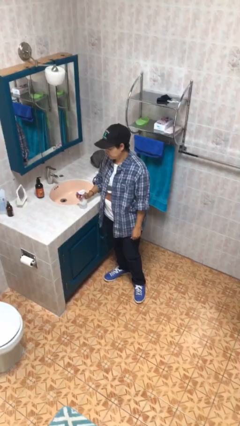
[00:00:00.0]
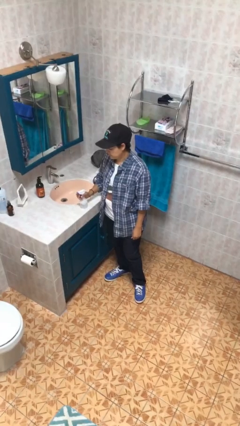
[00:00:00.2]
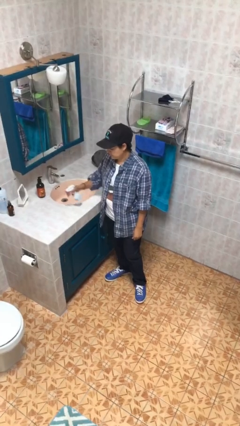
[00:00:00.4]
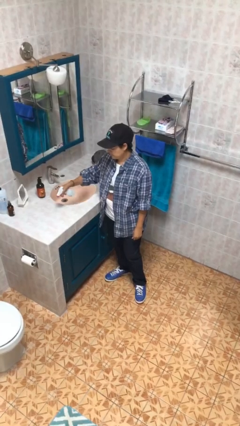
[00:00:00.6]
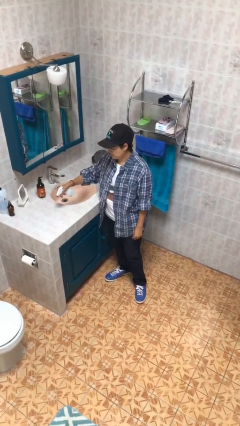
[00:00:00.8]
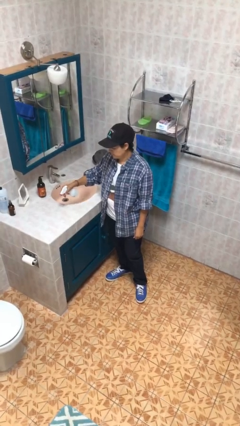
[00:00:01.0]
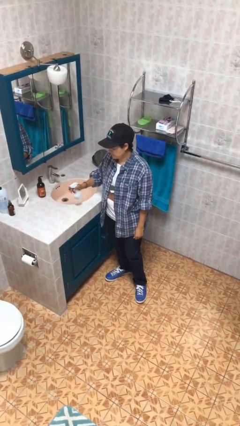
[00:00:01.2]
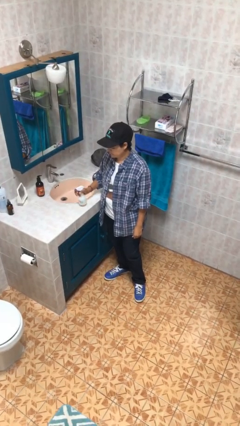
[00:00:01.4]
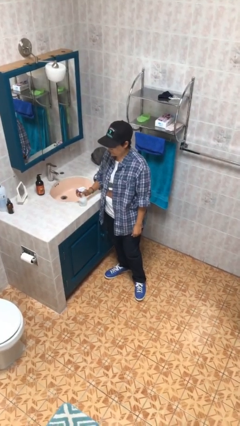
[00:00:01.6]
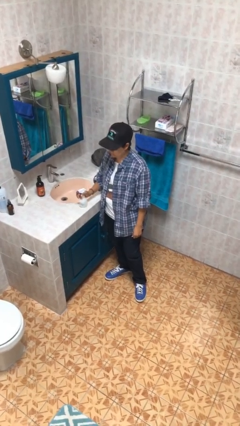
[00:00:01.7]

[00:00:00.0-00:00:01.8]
person sprays from bottle

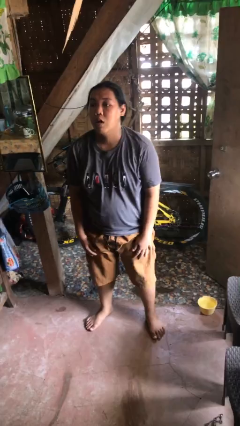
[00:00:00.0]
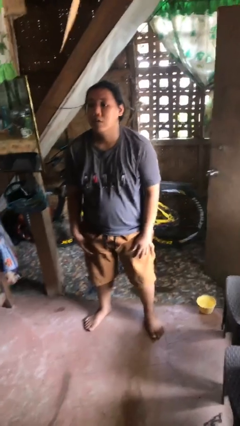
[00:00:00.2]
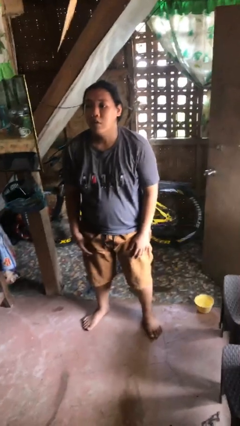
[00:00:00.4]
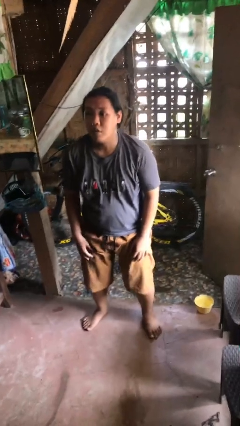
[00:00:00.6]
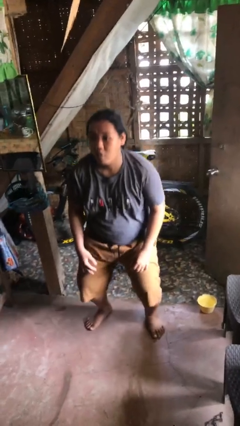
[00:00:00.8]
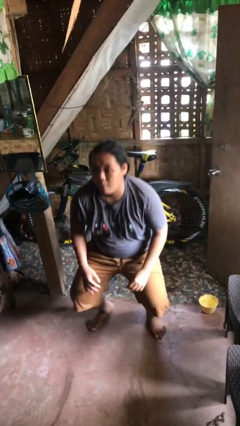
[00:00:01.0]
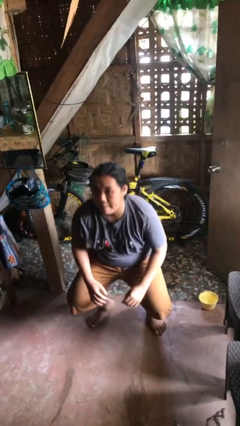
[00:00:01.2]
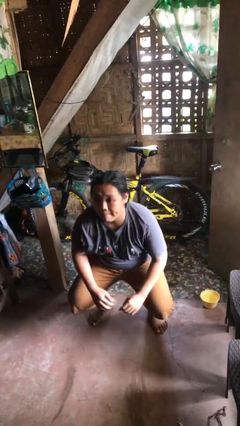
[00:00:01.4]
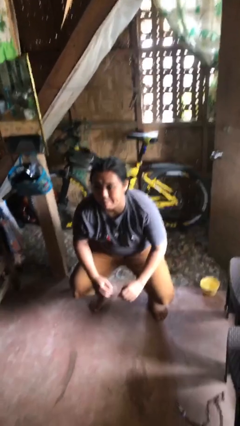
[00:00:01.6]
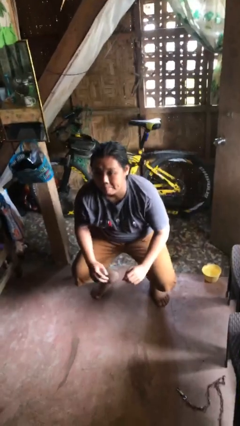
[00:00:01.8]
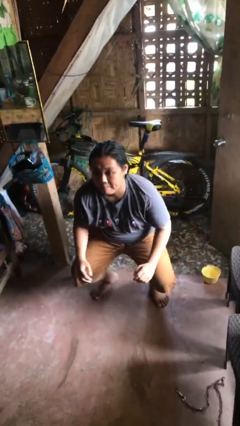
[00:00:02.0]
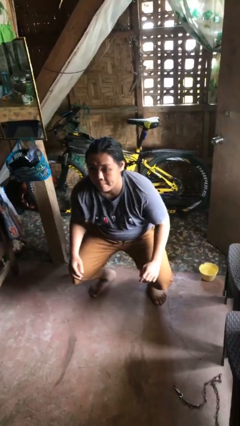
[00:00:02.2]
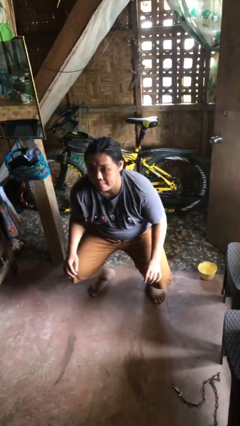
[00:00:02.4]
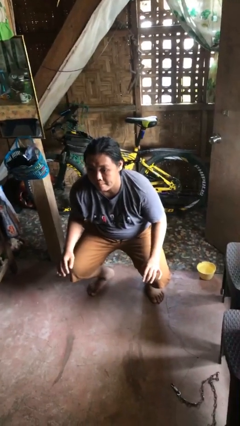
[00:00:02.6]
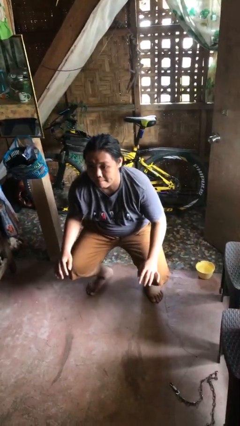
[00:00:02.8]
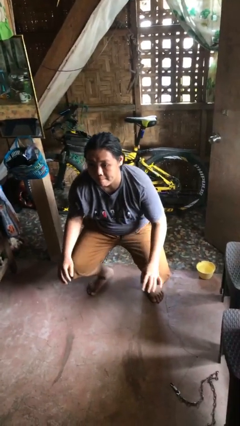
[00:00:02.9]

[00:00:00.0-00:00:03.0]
person squats

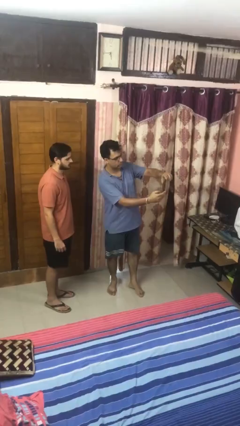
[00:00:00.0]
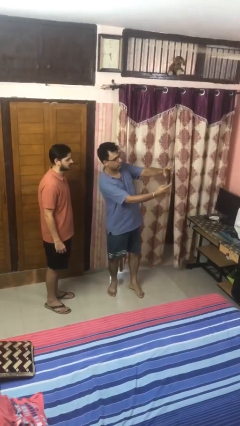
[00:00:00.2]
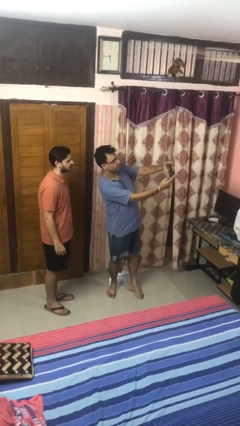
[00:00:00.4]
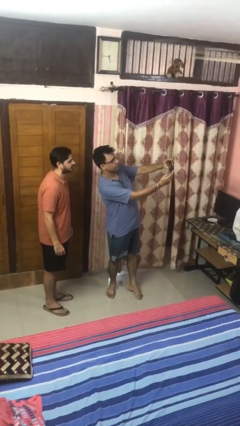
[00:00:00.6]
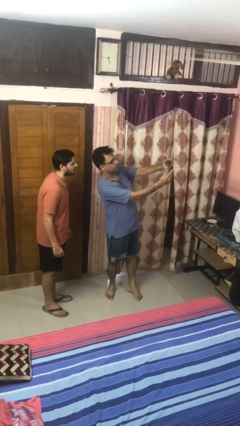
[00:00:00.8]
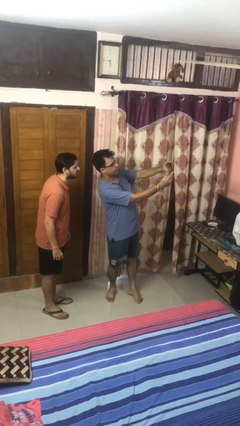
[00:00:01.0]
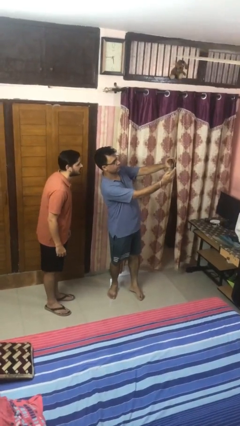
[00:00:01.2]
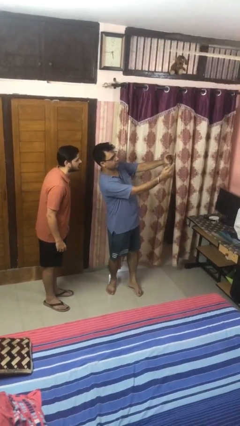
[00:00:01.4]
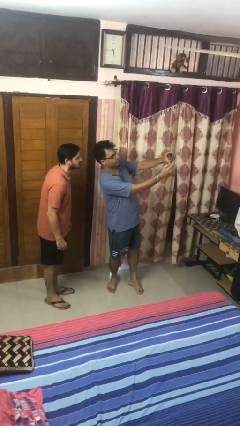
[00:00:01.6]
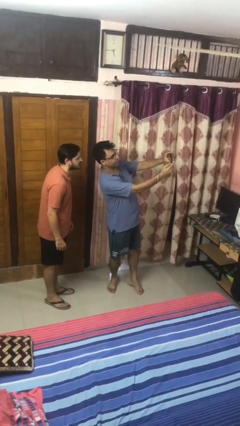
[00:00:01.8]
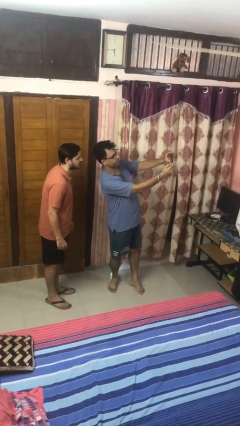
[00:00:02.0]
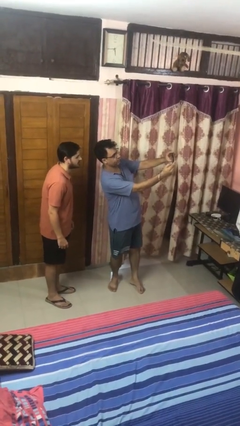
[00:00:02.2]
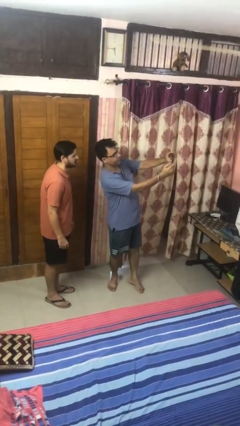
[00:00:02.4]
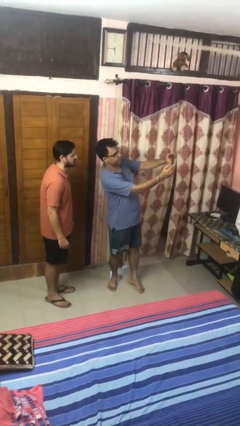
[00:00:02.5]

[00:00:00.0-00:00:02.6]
person takes selfie with person

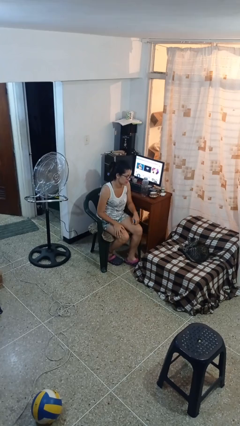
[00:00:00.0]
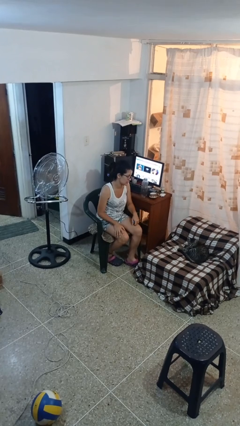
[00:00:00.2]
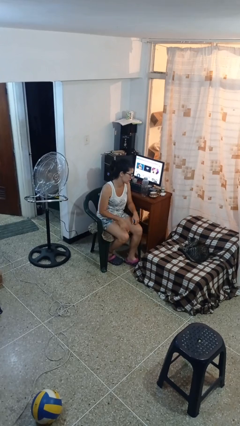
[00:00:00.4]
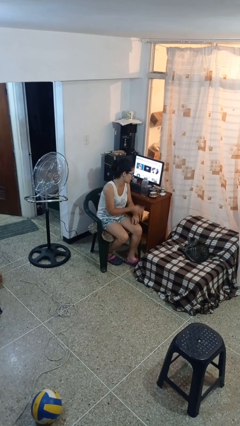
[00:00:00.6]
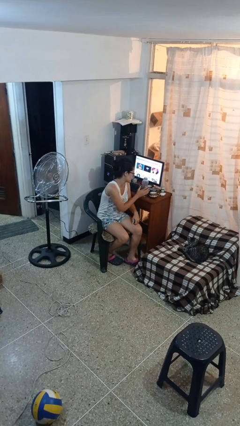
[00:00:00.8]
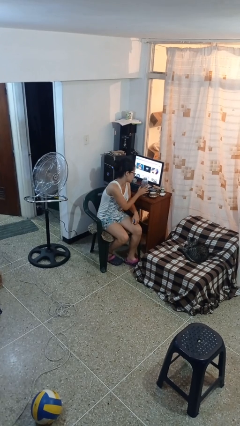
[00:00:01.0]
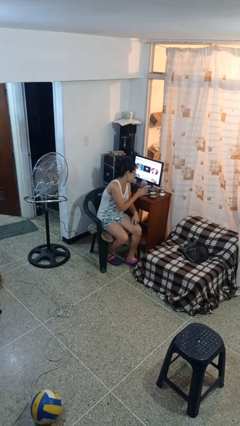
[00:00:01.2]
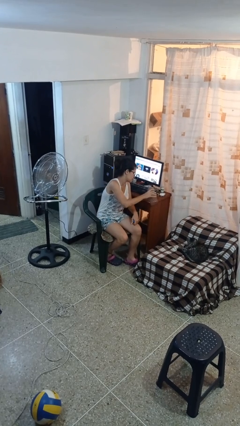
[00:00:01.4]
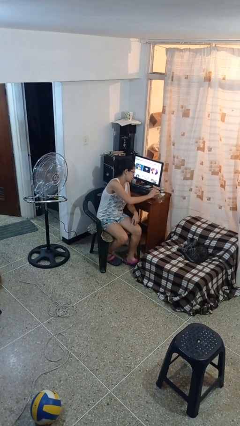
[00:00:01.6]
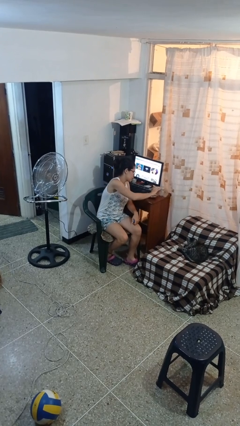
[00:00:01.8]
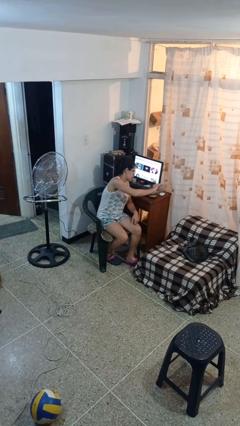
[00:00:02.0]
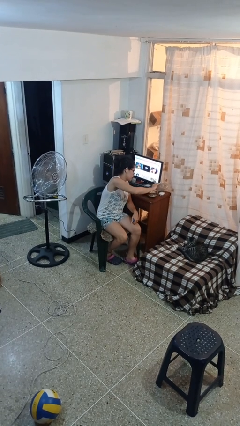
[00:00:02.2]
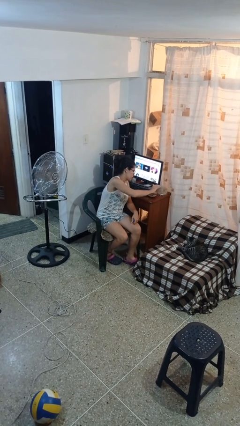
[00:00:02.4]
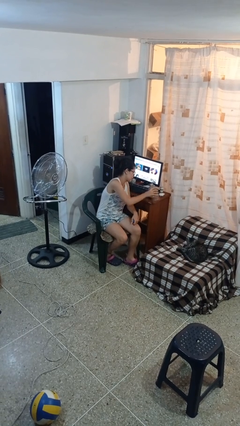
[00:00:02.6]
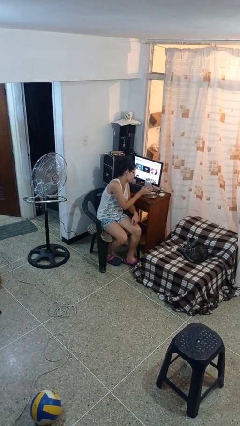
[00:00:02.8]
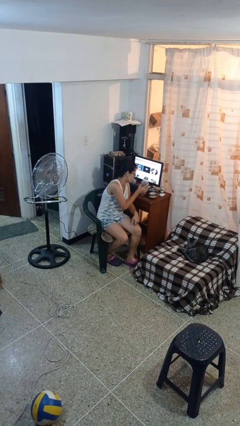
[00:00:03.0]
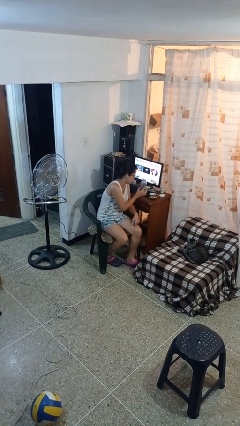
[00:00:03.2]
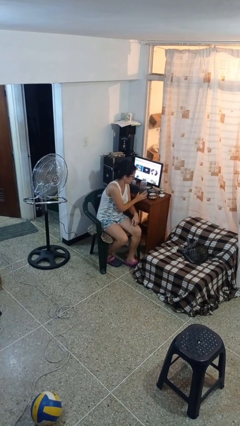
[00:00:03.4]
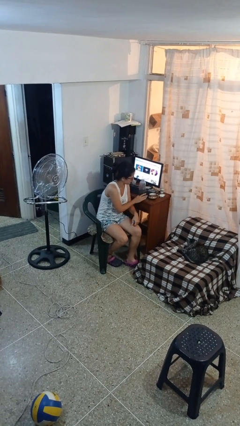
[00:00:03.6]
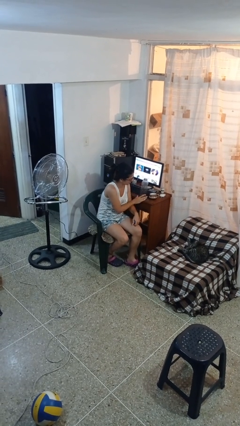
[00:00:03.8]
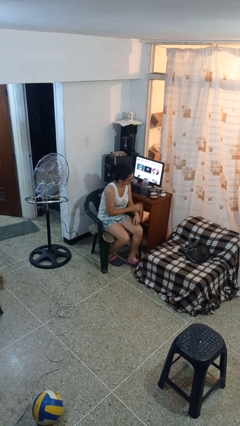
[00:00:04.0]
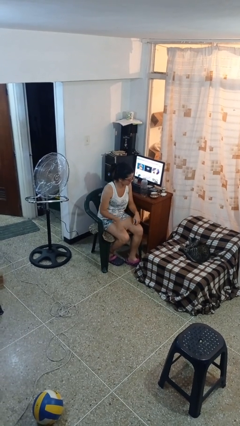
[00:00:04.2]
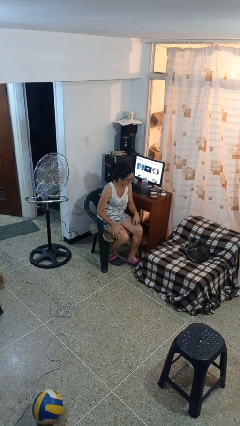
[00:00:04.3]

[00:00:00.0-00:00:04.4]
person pours liquid into cup

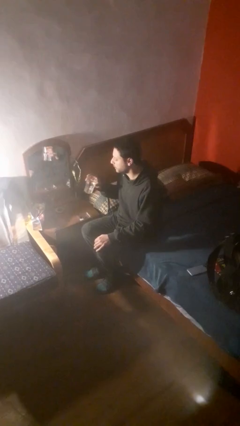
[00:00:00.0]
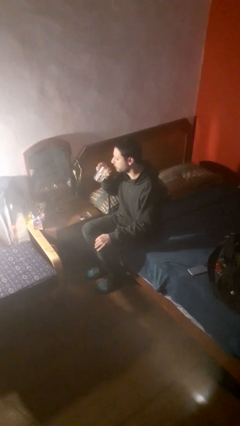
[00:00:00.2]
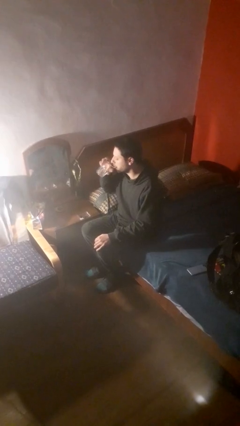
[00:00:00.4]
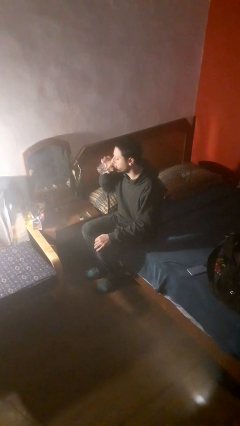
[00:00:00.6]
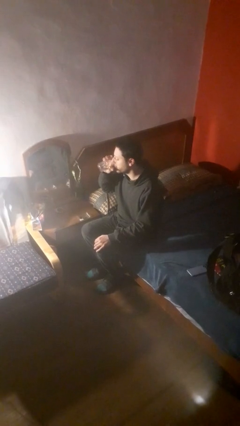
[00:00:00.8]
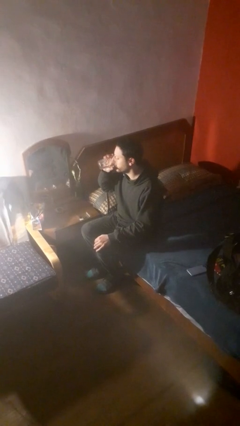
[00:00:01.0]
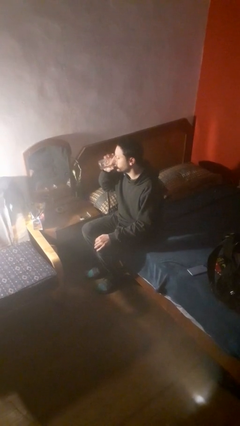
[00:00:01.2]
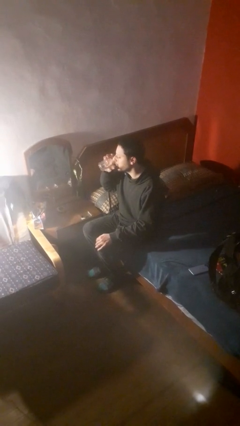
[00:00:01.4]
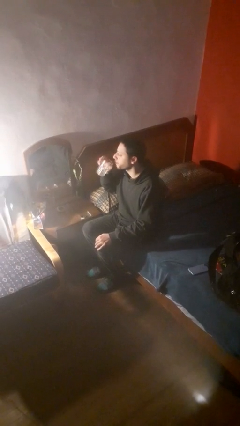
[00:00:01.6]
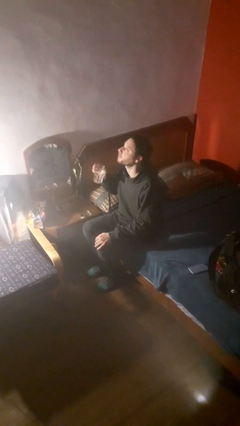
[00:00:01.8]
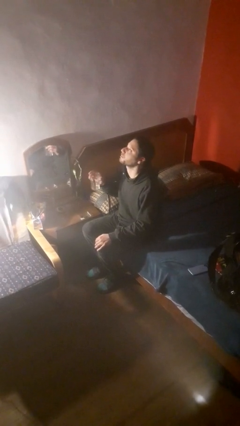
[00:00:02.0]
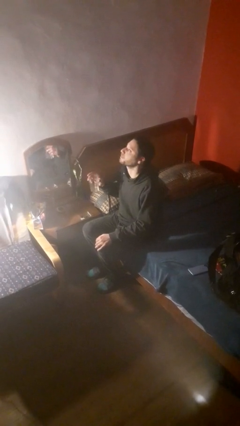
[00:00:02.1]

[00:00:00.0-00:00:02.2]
person drinks from cup

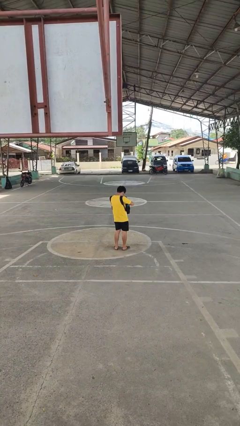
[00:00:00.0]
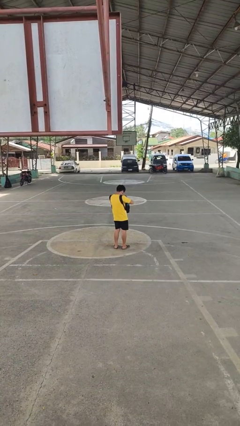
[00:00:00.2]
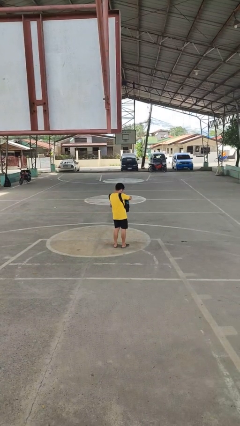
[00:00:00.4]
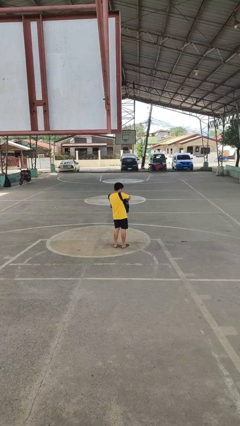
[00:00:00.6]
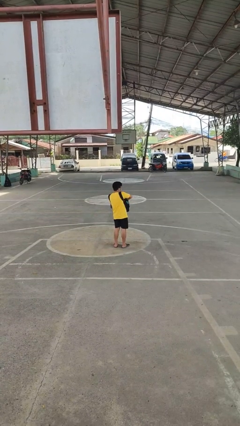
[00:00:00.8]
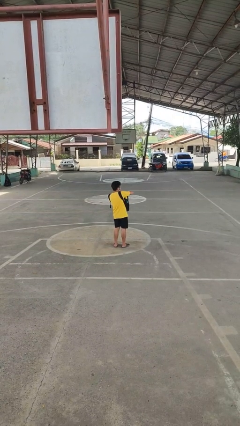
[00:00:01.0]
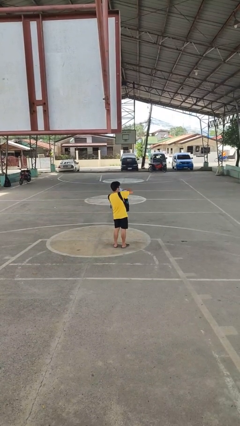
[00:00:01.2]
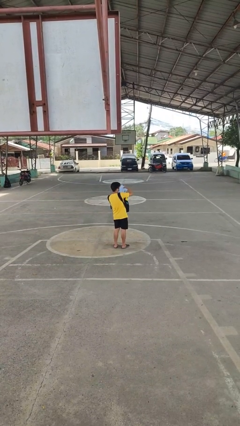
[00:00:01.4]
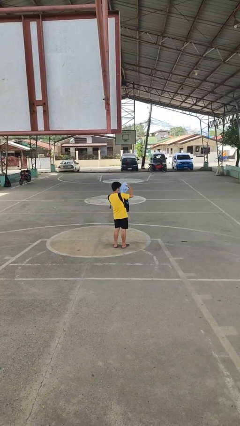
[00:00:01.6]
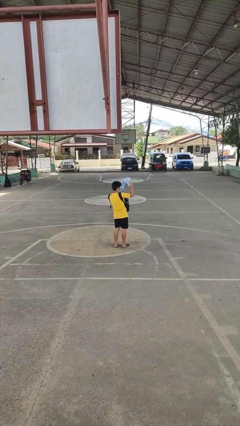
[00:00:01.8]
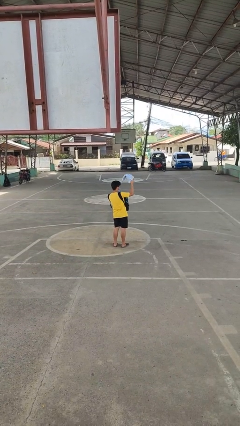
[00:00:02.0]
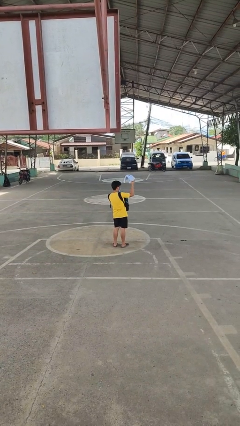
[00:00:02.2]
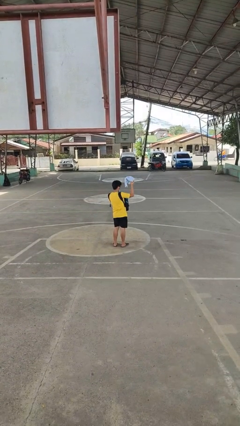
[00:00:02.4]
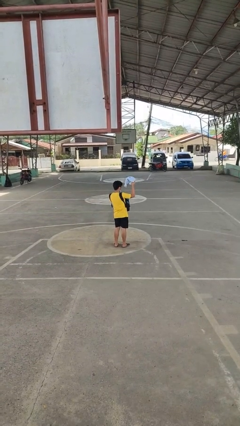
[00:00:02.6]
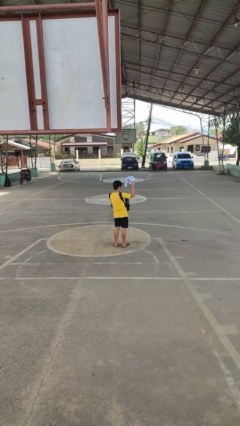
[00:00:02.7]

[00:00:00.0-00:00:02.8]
person takes object from backpack

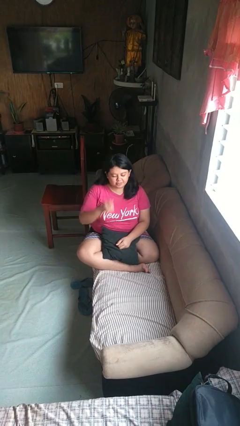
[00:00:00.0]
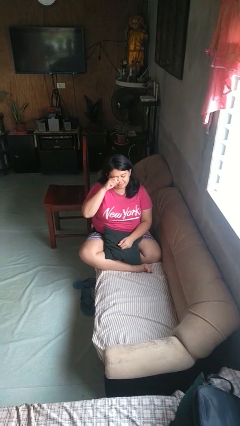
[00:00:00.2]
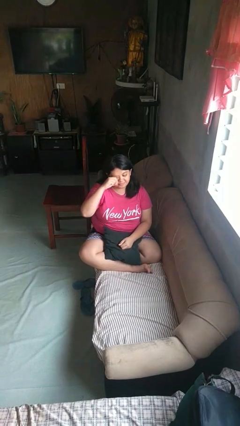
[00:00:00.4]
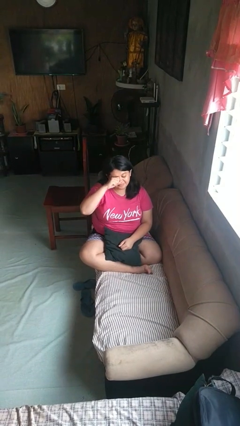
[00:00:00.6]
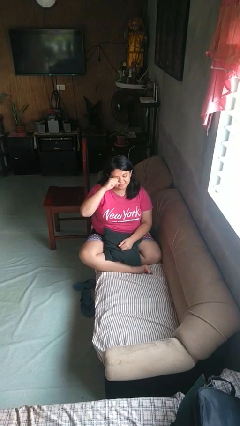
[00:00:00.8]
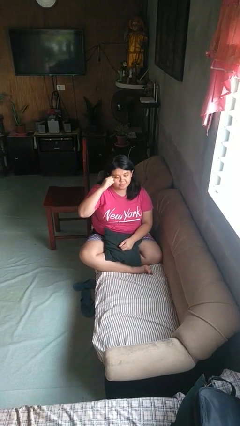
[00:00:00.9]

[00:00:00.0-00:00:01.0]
person rubs eyes
